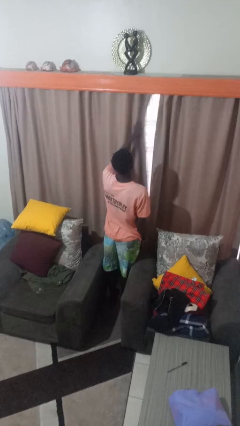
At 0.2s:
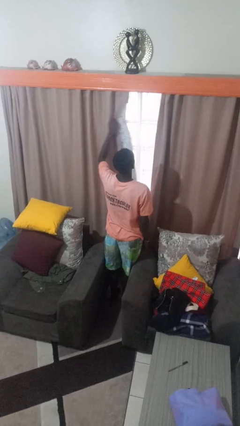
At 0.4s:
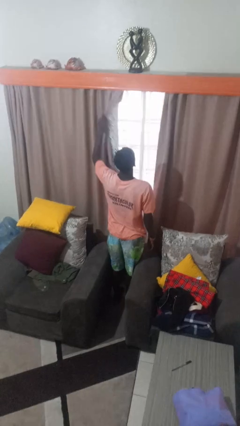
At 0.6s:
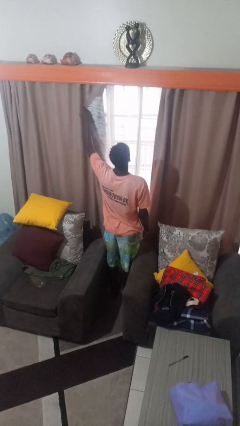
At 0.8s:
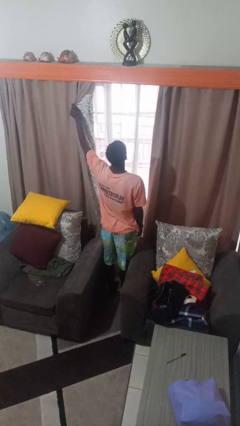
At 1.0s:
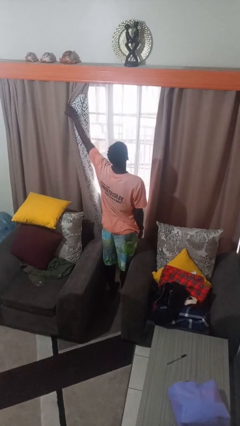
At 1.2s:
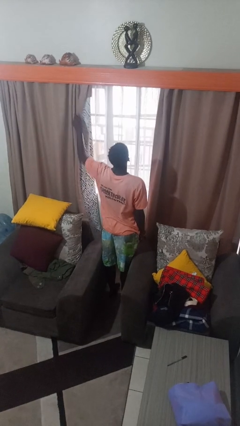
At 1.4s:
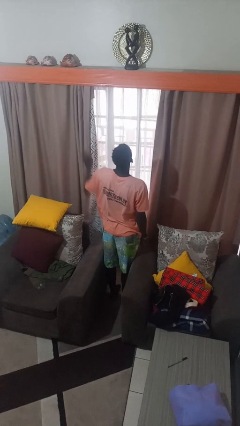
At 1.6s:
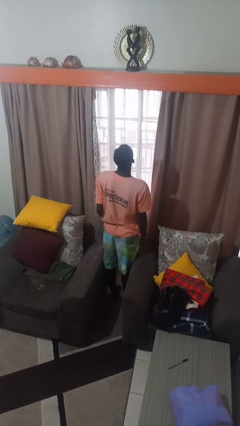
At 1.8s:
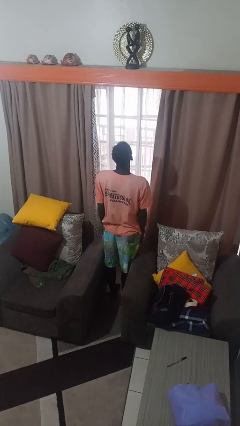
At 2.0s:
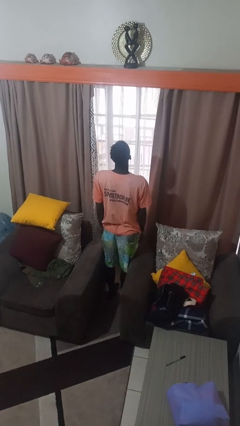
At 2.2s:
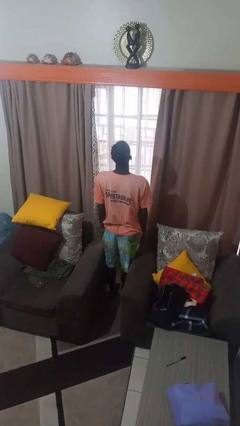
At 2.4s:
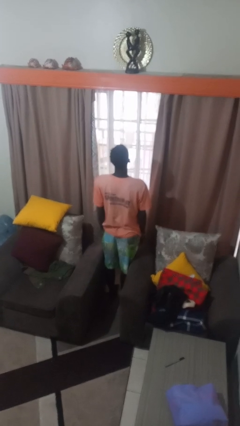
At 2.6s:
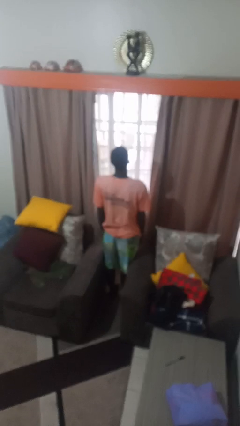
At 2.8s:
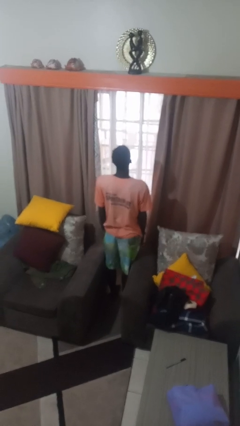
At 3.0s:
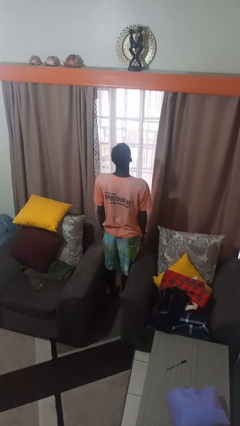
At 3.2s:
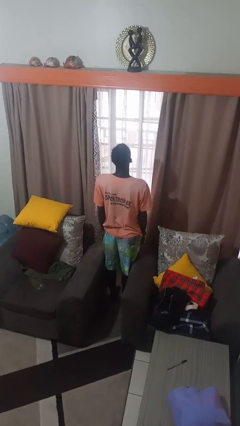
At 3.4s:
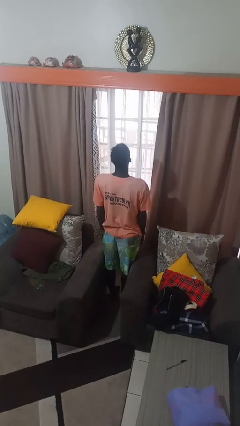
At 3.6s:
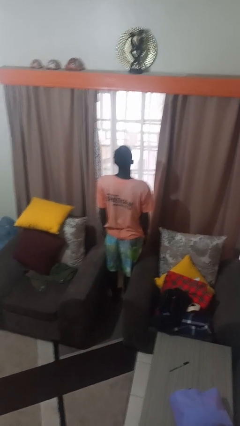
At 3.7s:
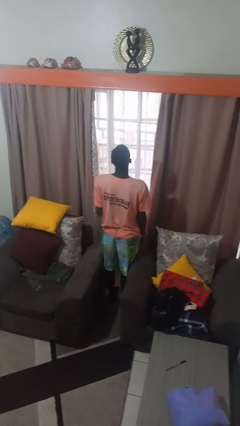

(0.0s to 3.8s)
person opens curtains

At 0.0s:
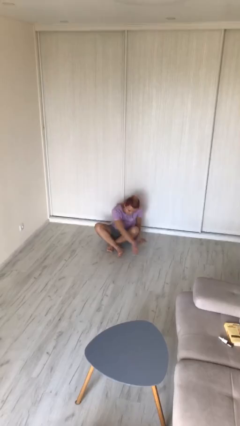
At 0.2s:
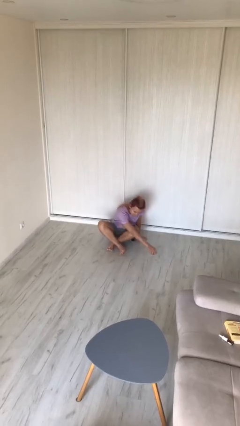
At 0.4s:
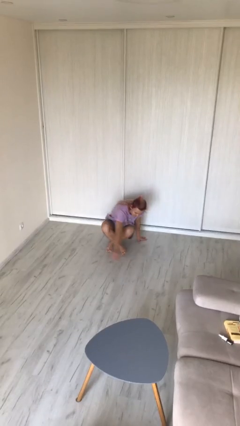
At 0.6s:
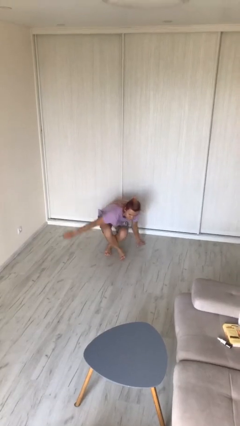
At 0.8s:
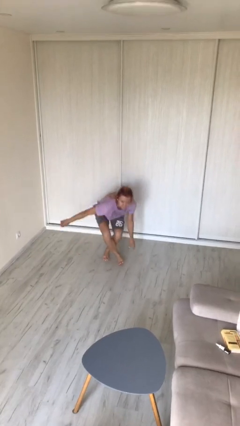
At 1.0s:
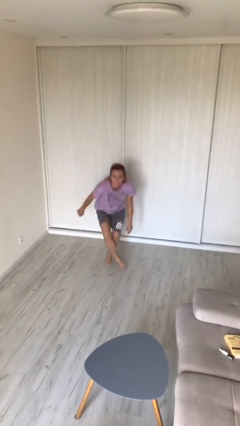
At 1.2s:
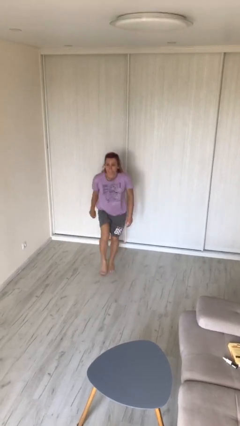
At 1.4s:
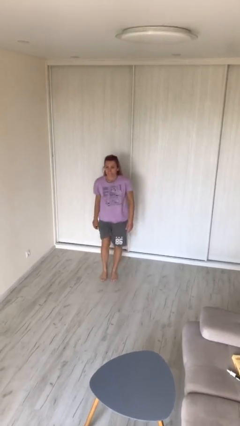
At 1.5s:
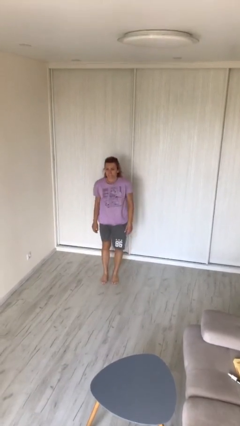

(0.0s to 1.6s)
person stands up from floor

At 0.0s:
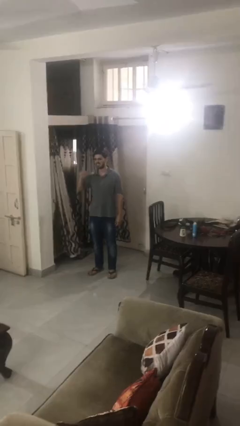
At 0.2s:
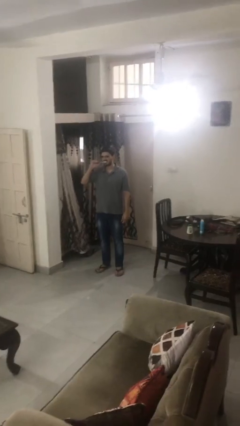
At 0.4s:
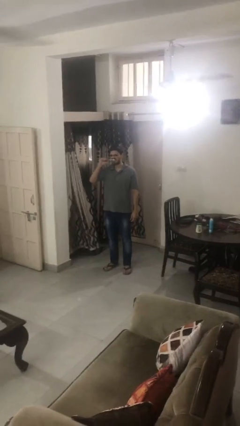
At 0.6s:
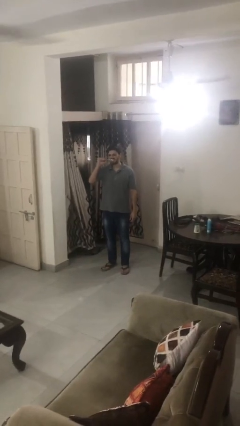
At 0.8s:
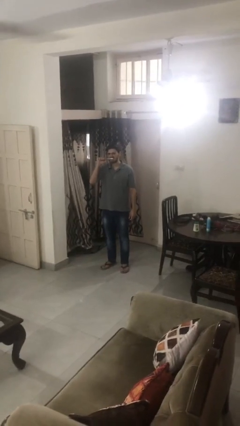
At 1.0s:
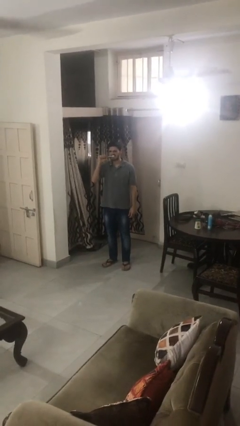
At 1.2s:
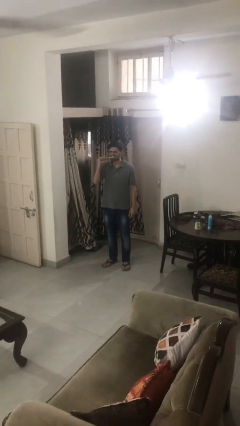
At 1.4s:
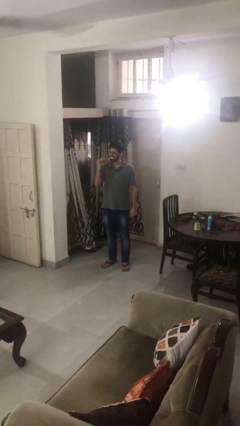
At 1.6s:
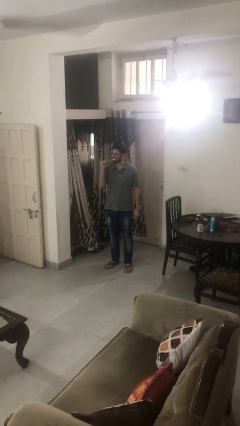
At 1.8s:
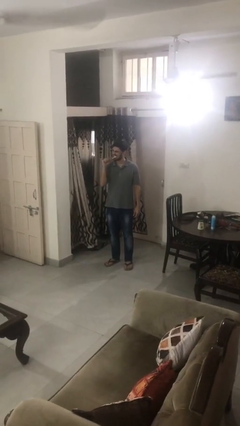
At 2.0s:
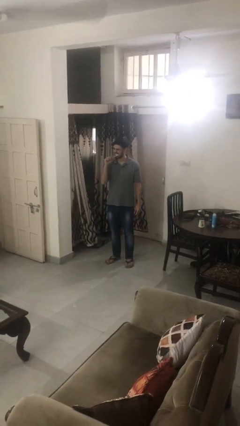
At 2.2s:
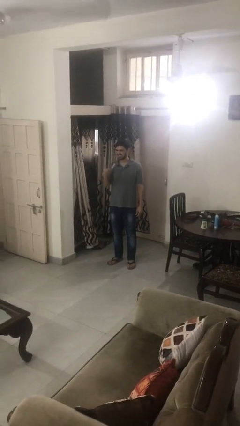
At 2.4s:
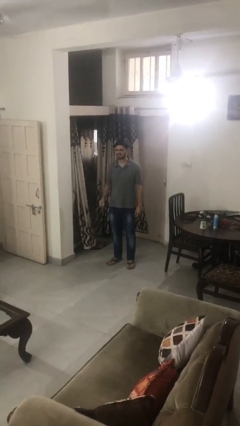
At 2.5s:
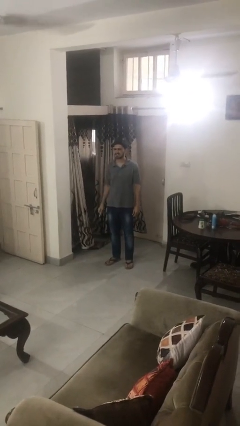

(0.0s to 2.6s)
person brushes teeth

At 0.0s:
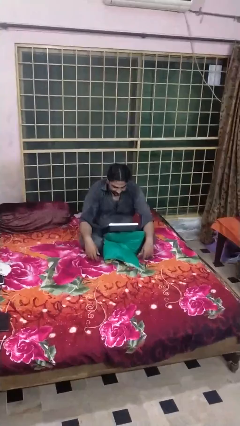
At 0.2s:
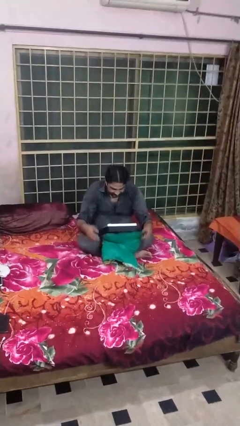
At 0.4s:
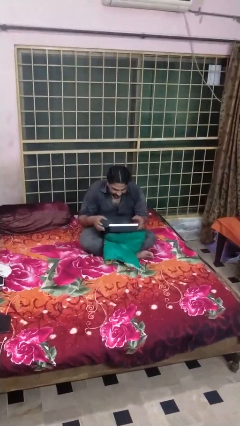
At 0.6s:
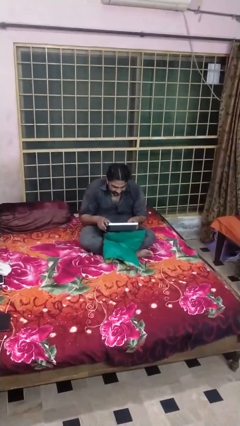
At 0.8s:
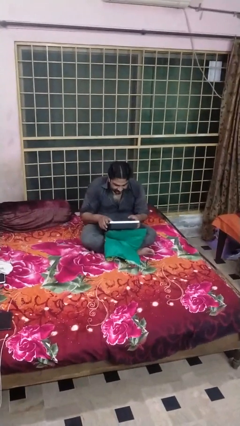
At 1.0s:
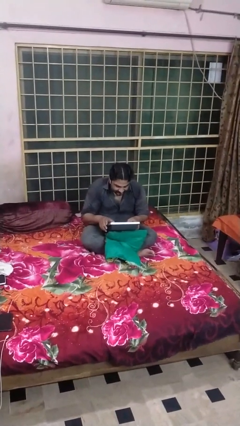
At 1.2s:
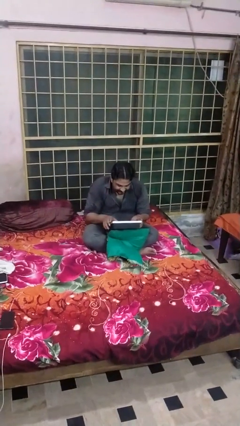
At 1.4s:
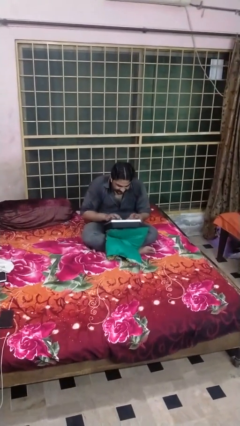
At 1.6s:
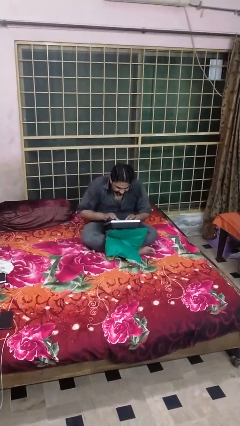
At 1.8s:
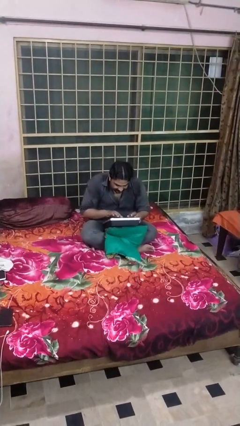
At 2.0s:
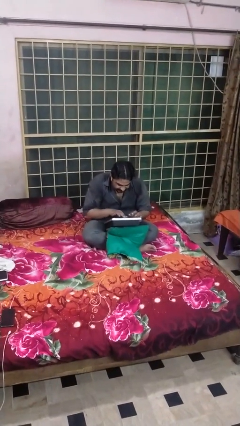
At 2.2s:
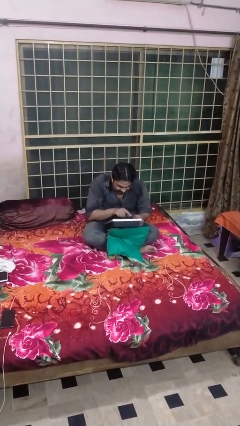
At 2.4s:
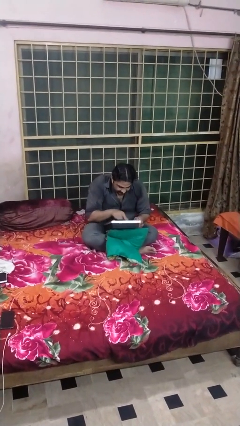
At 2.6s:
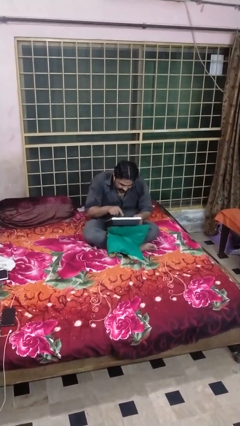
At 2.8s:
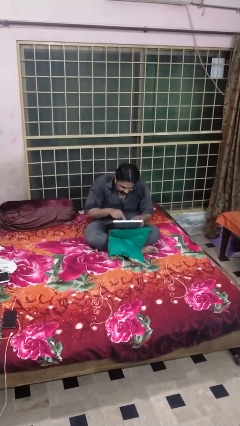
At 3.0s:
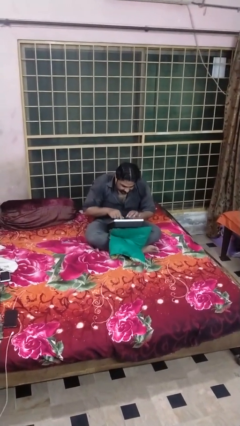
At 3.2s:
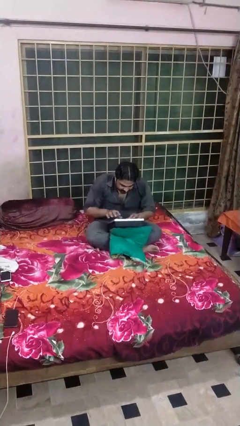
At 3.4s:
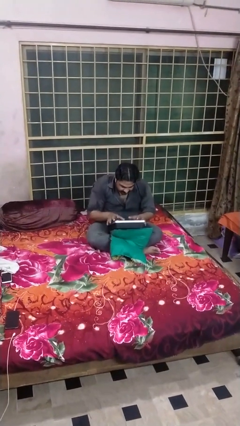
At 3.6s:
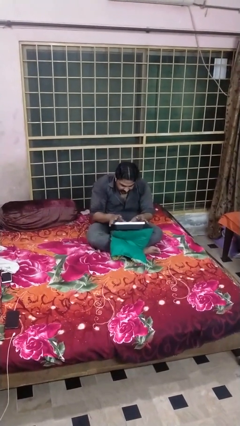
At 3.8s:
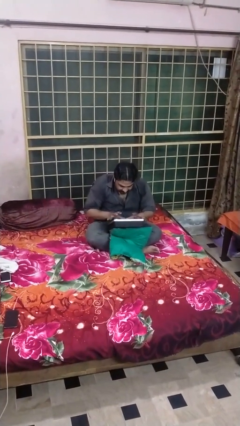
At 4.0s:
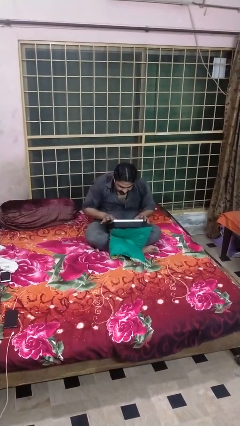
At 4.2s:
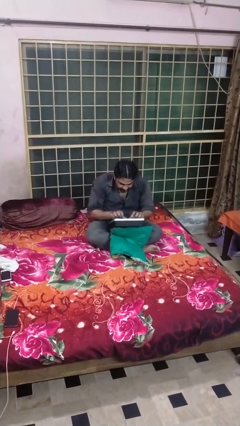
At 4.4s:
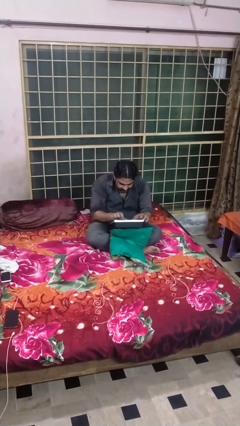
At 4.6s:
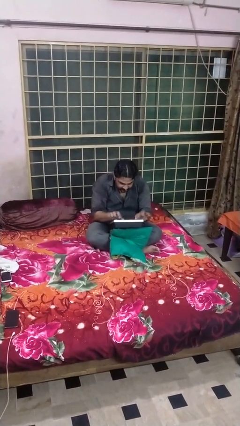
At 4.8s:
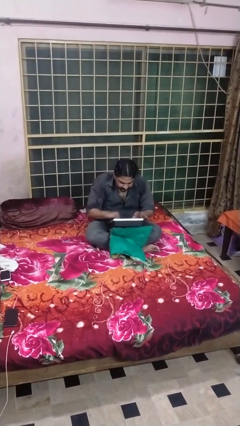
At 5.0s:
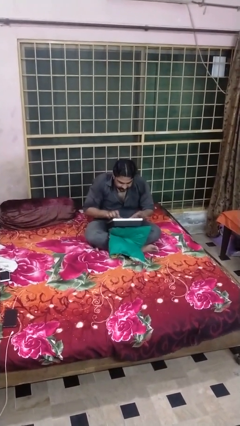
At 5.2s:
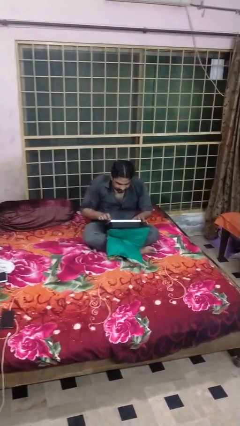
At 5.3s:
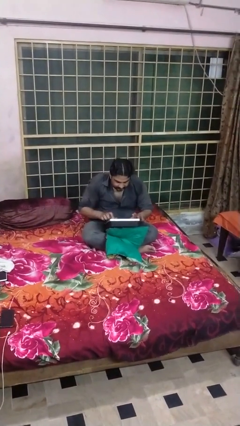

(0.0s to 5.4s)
person interacts with tablet

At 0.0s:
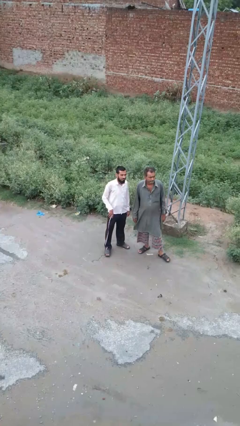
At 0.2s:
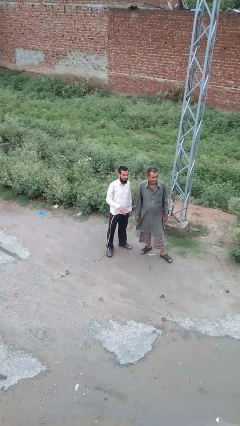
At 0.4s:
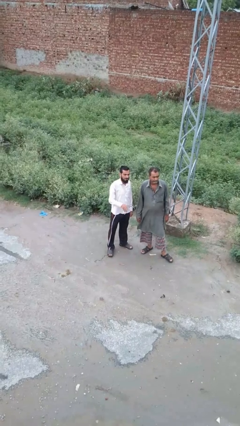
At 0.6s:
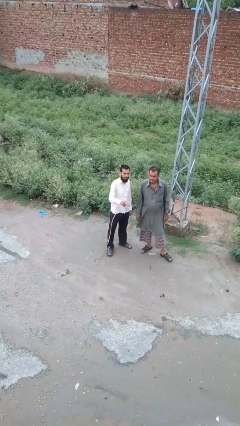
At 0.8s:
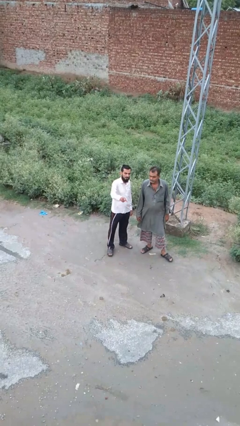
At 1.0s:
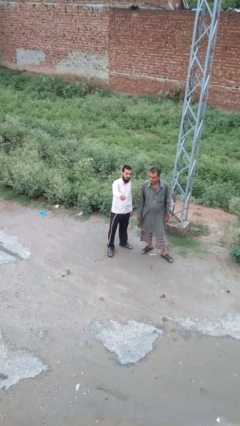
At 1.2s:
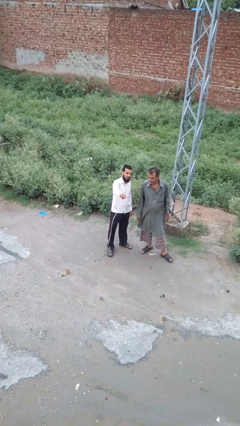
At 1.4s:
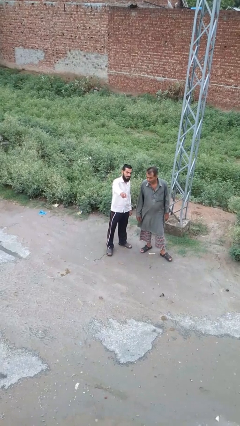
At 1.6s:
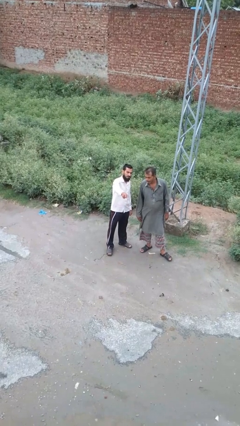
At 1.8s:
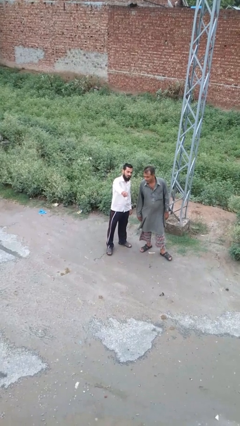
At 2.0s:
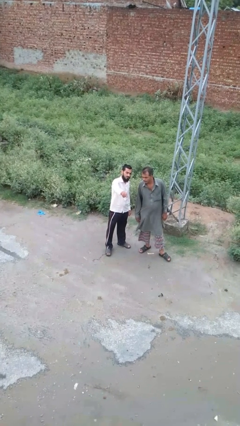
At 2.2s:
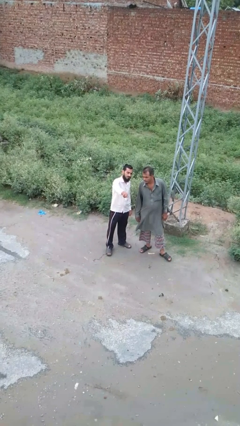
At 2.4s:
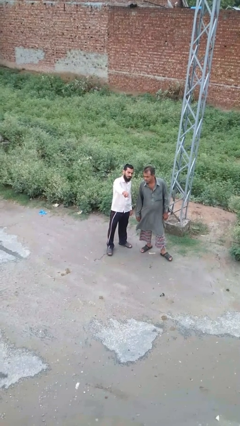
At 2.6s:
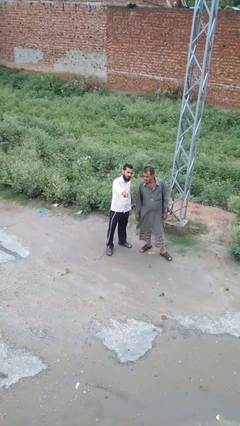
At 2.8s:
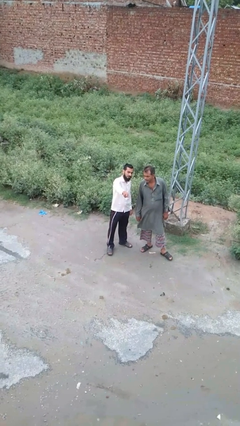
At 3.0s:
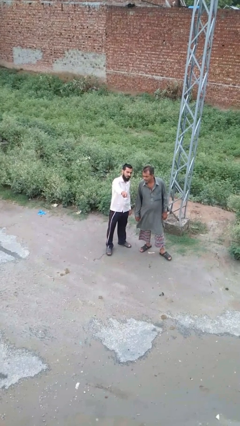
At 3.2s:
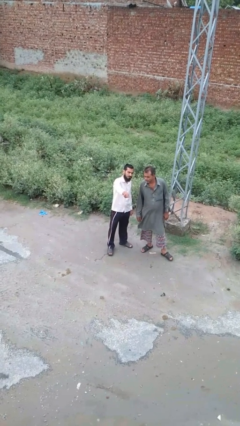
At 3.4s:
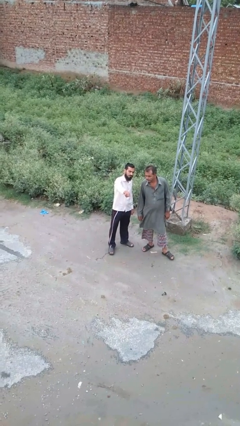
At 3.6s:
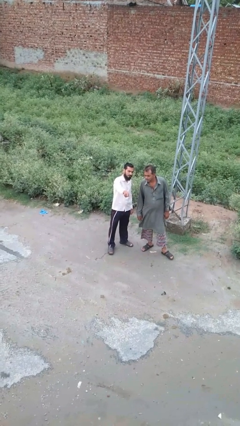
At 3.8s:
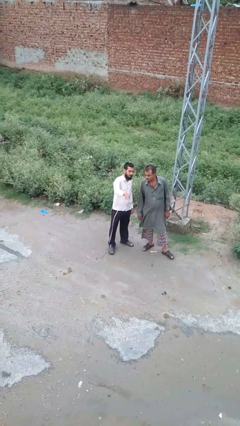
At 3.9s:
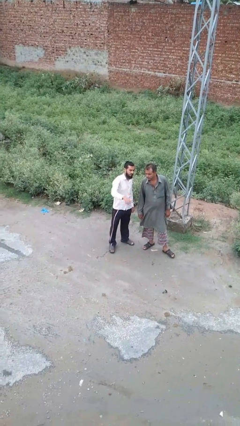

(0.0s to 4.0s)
person points at person

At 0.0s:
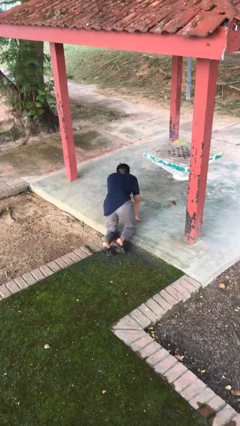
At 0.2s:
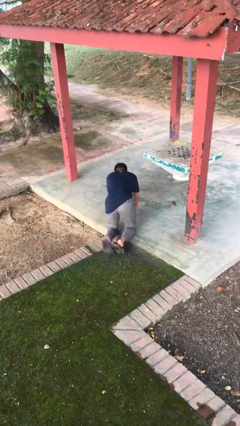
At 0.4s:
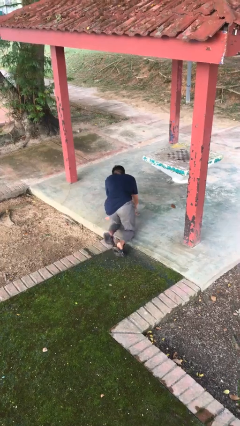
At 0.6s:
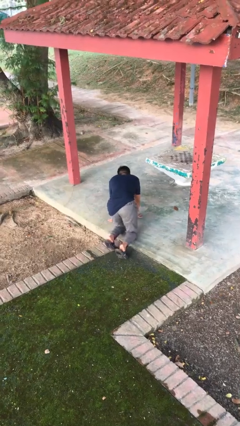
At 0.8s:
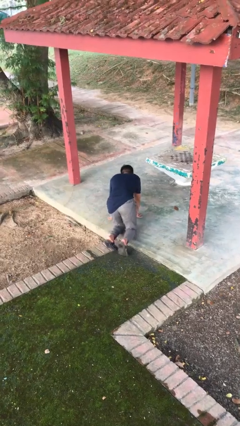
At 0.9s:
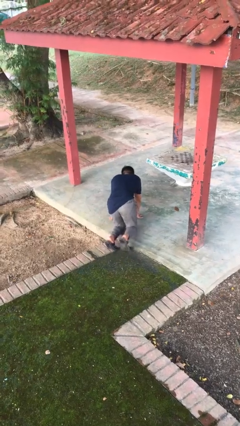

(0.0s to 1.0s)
person crawls
